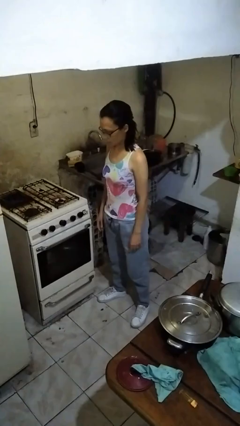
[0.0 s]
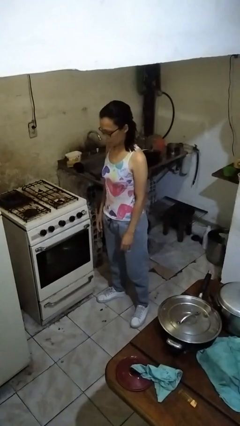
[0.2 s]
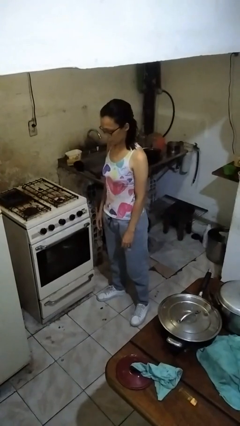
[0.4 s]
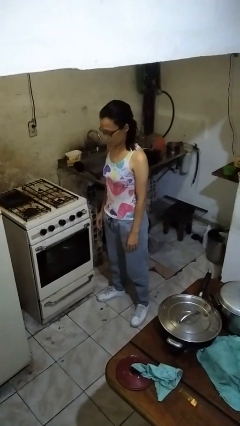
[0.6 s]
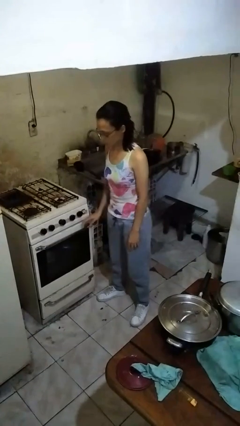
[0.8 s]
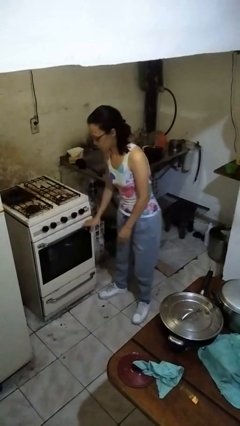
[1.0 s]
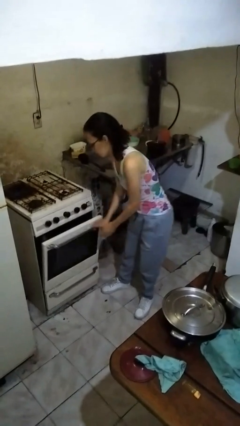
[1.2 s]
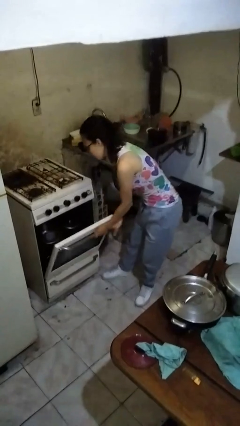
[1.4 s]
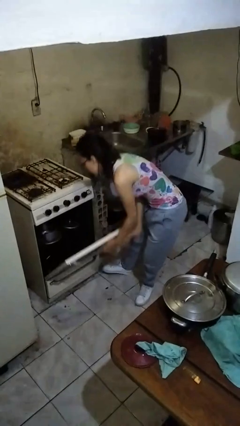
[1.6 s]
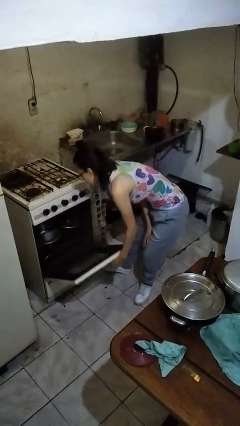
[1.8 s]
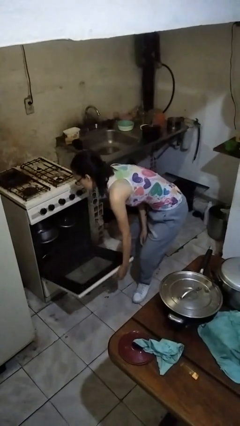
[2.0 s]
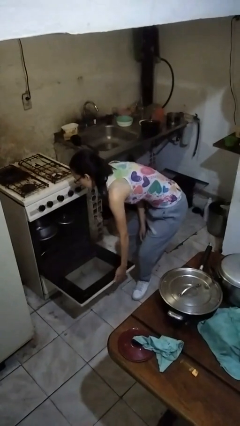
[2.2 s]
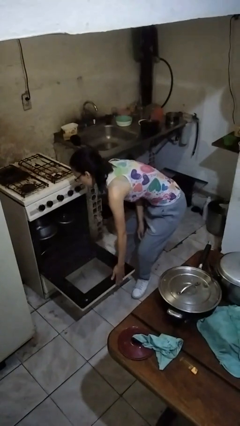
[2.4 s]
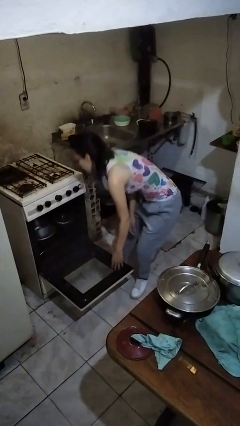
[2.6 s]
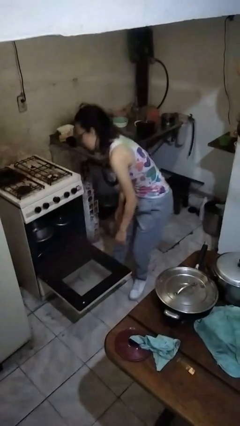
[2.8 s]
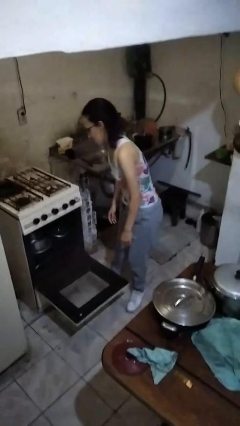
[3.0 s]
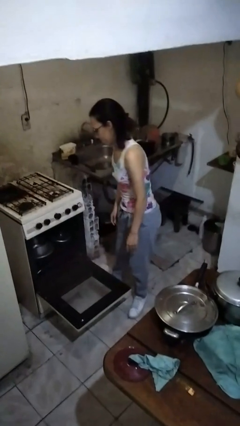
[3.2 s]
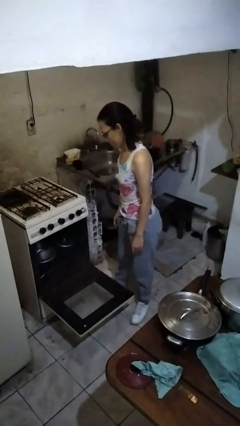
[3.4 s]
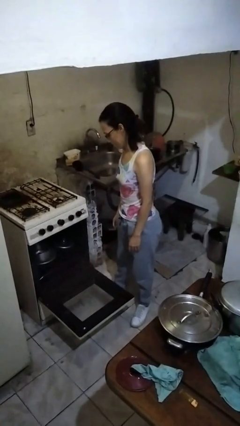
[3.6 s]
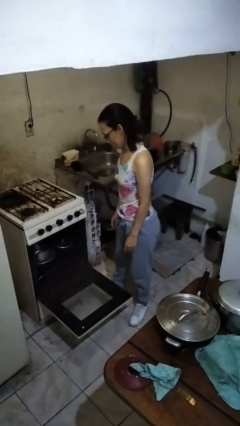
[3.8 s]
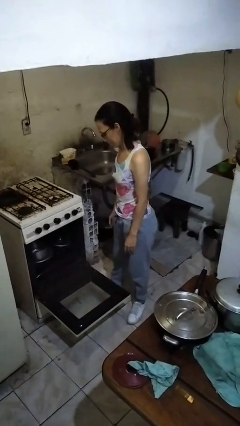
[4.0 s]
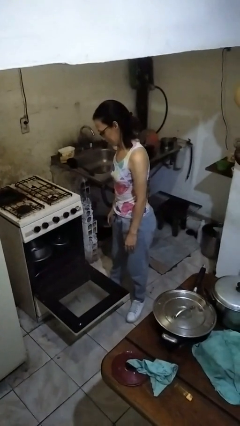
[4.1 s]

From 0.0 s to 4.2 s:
person opens oven door

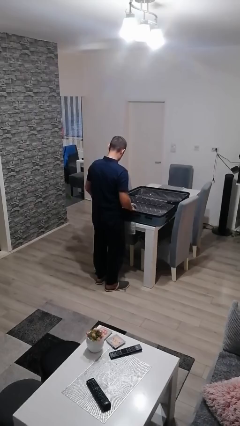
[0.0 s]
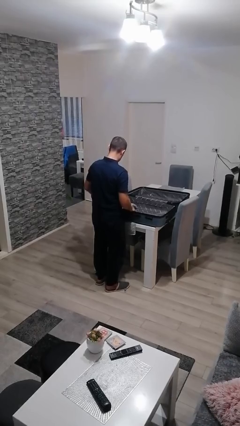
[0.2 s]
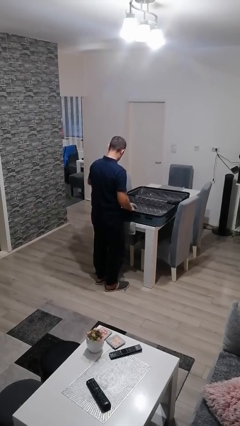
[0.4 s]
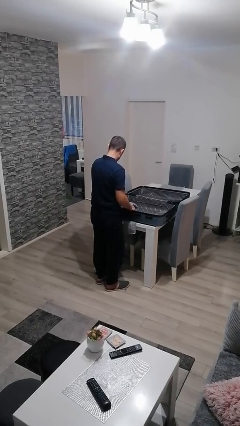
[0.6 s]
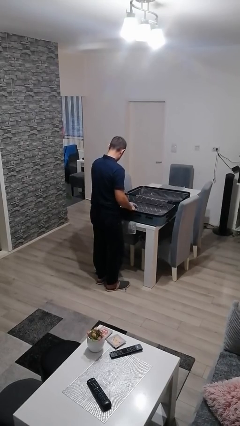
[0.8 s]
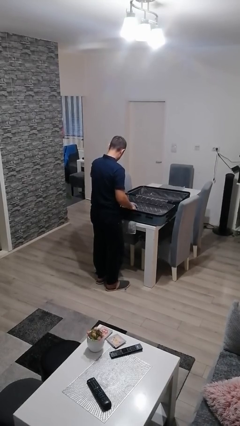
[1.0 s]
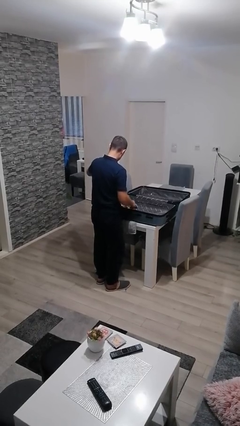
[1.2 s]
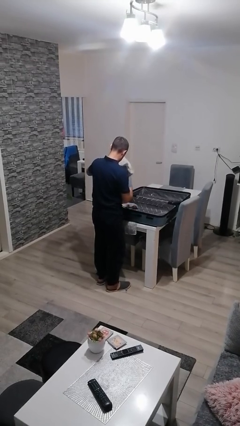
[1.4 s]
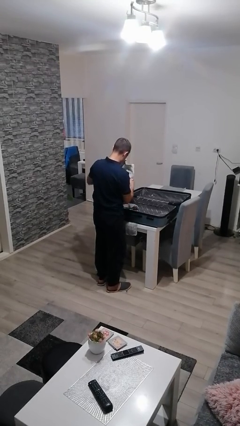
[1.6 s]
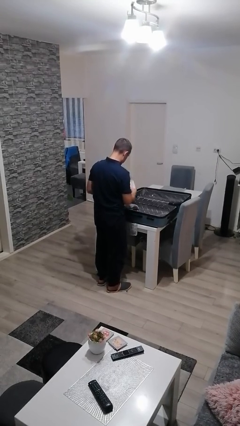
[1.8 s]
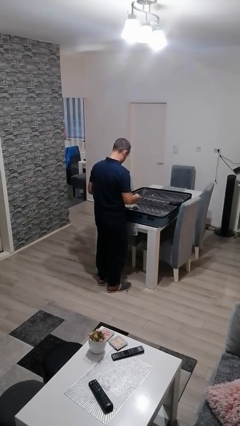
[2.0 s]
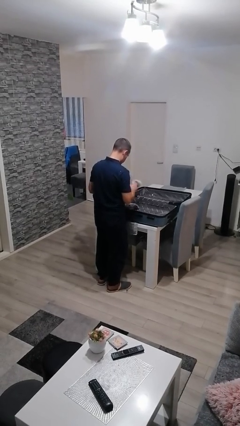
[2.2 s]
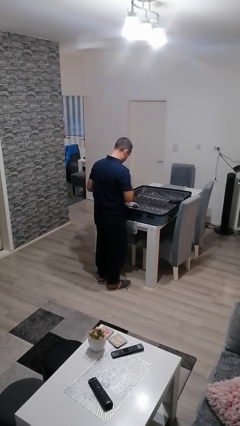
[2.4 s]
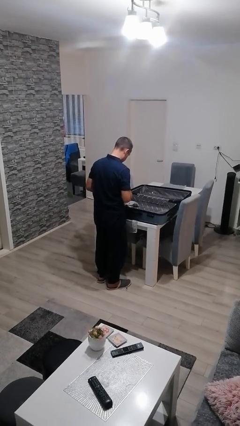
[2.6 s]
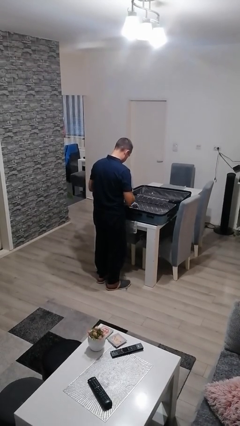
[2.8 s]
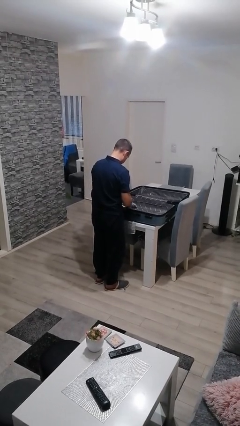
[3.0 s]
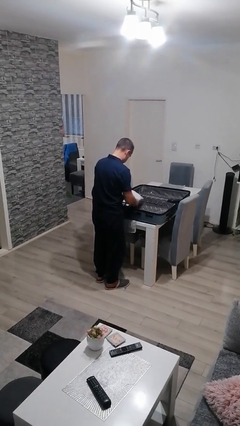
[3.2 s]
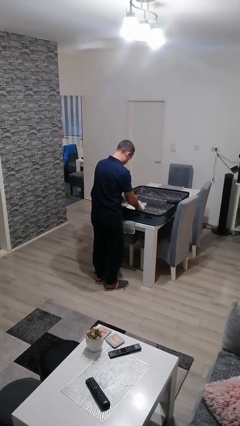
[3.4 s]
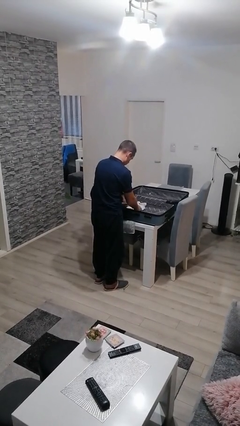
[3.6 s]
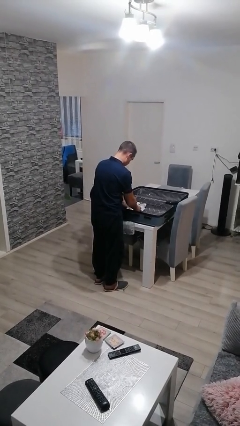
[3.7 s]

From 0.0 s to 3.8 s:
person loads clothes into suitcase

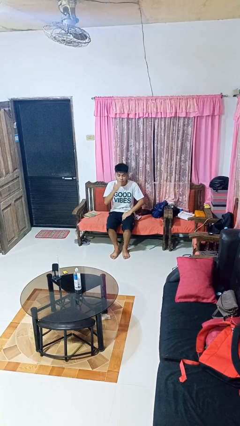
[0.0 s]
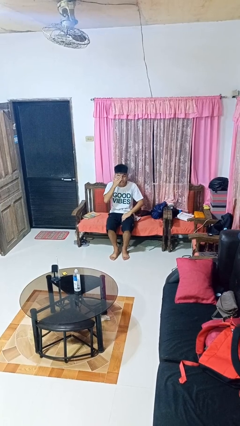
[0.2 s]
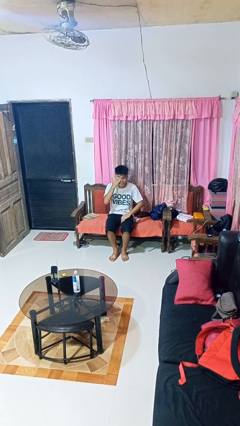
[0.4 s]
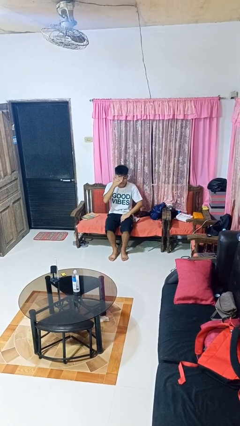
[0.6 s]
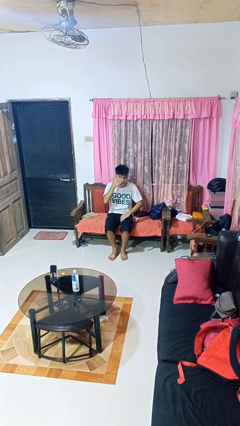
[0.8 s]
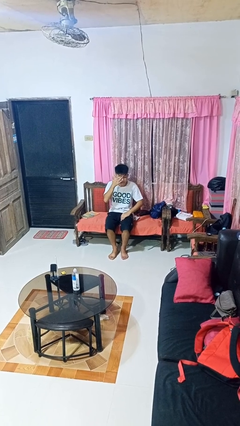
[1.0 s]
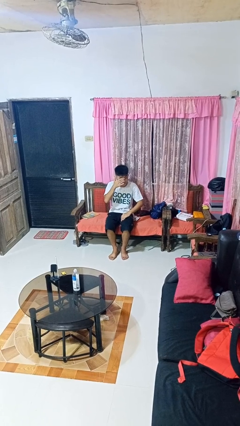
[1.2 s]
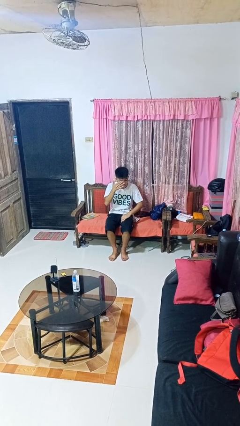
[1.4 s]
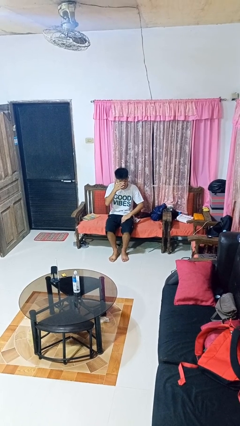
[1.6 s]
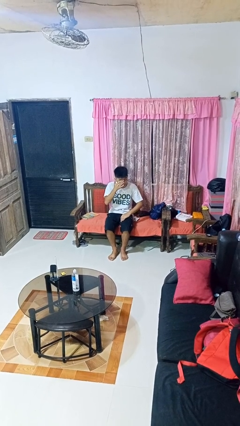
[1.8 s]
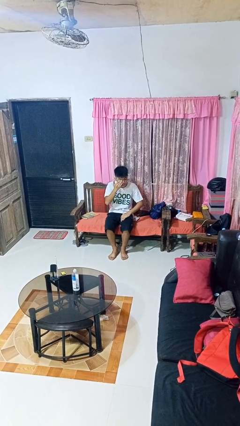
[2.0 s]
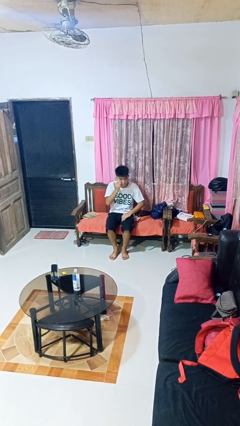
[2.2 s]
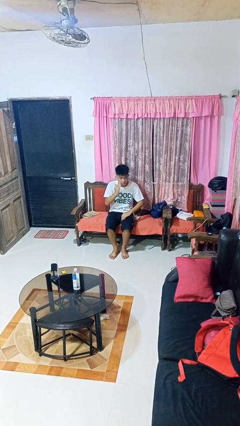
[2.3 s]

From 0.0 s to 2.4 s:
person rubs eyes

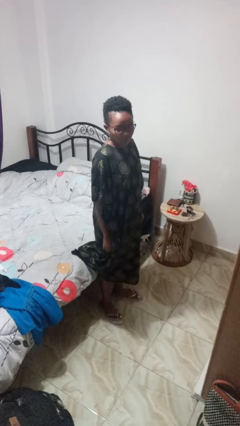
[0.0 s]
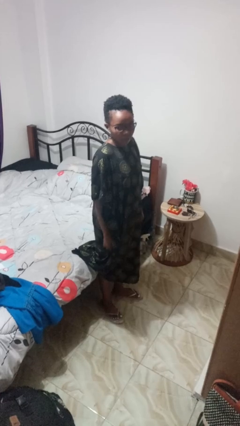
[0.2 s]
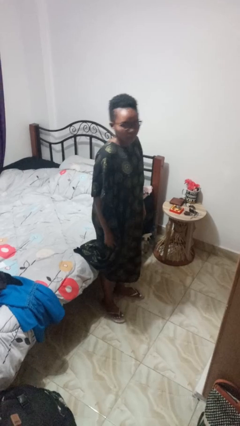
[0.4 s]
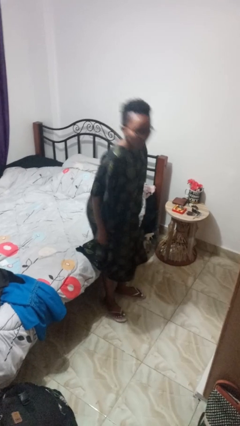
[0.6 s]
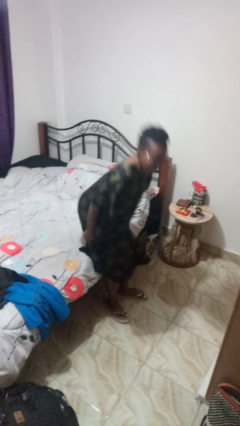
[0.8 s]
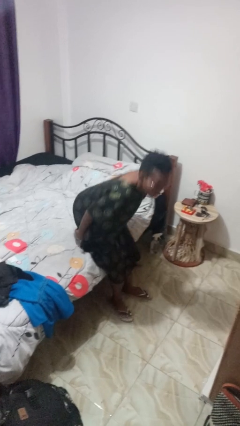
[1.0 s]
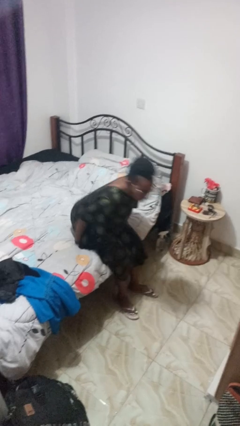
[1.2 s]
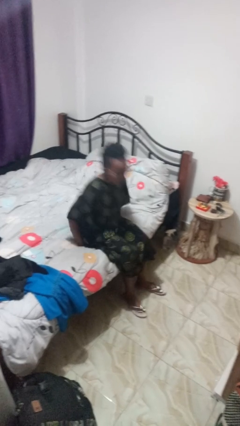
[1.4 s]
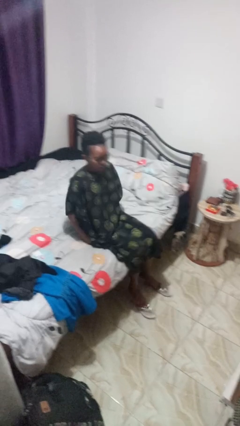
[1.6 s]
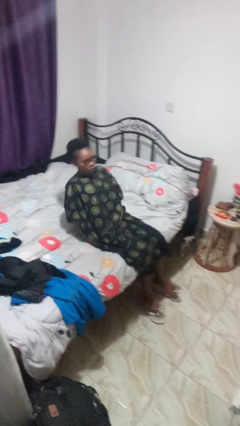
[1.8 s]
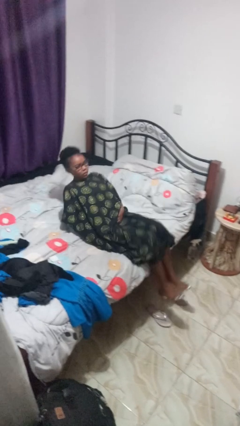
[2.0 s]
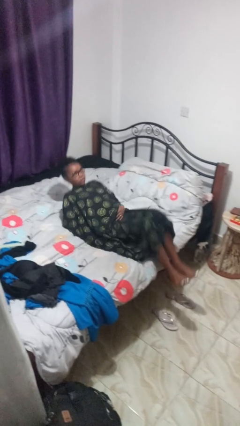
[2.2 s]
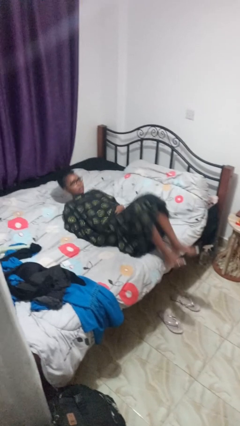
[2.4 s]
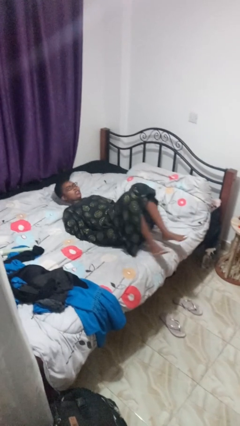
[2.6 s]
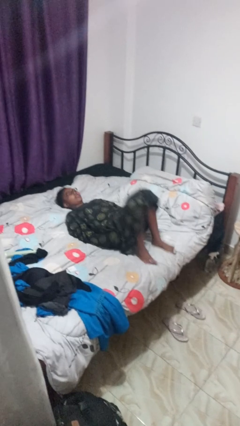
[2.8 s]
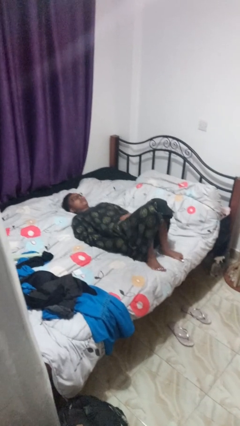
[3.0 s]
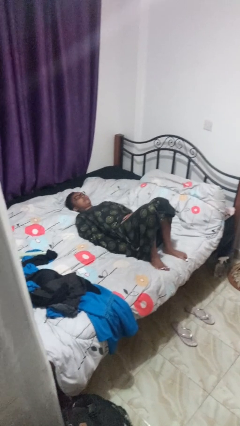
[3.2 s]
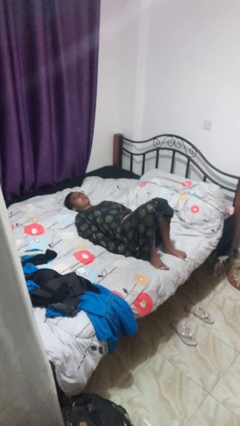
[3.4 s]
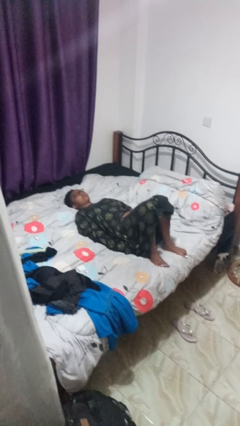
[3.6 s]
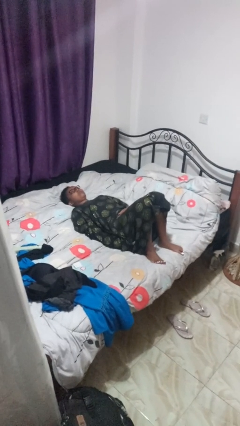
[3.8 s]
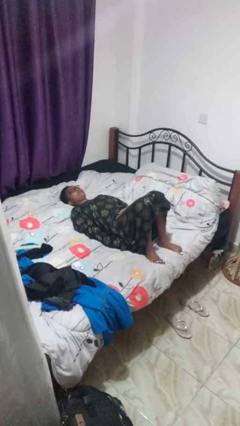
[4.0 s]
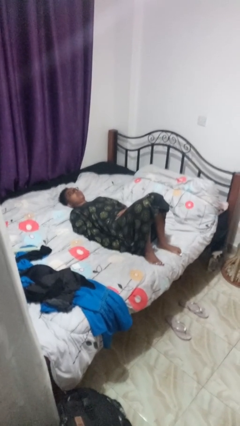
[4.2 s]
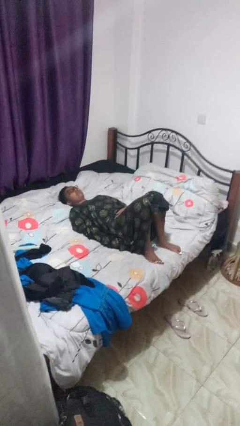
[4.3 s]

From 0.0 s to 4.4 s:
person lies down on bed

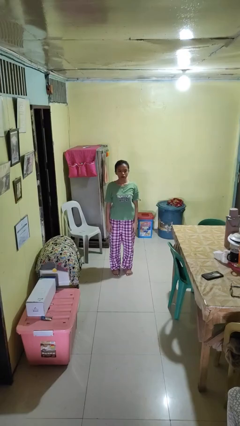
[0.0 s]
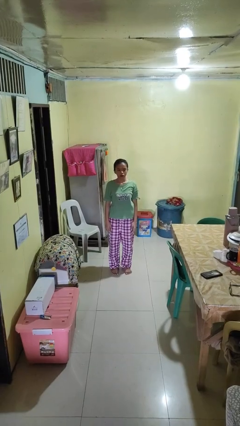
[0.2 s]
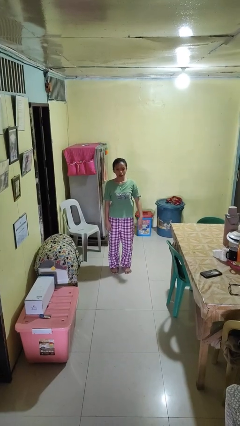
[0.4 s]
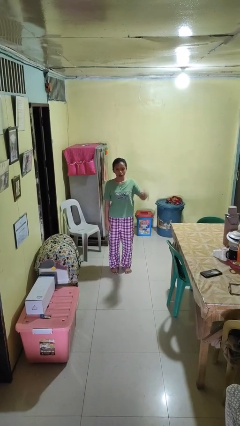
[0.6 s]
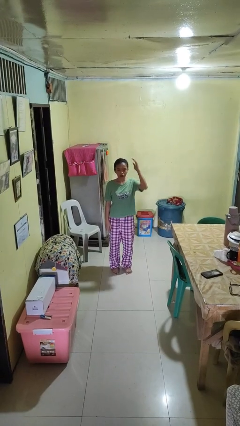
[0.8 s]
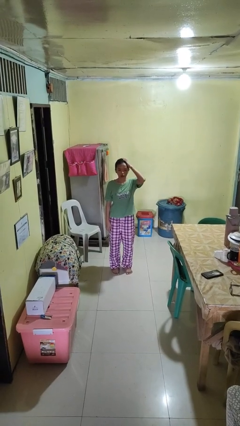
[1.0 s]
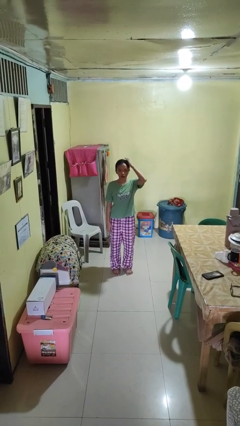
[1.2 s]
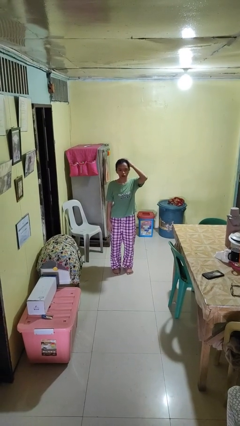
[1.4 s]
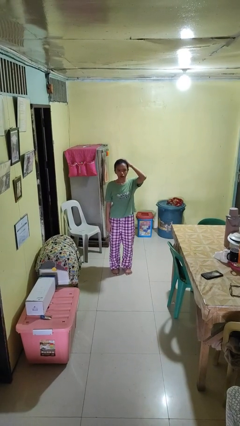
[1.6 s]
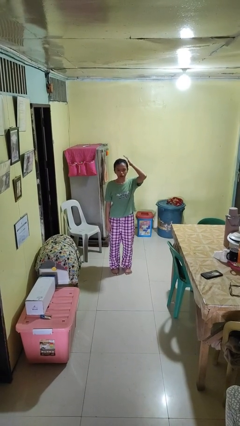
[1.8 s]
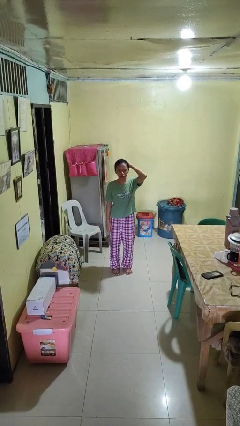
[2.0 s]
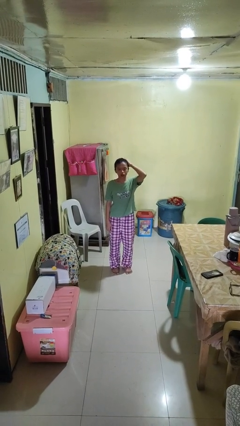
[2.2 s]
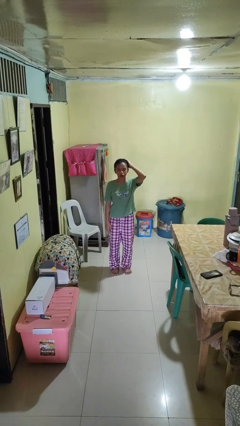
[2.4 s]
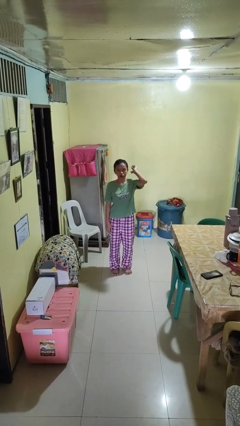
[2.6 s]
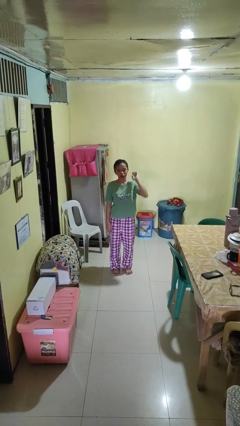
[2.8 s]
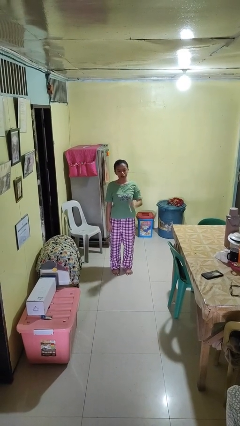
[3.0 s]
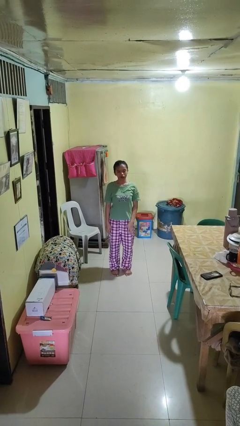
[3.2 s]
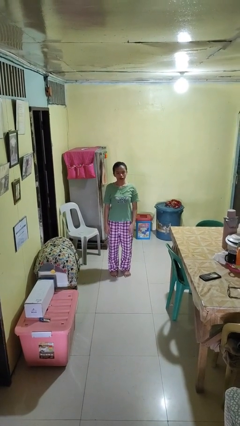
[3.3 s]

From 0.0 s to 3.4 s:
person pats head
